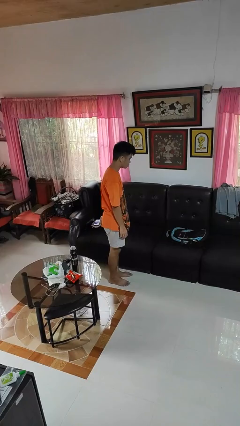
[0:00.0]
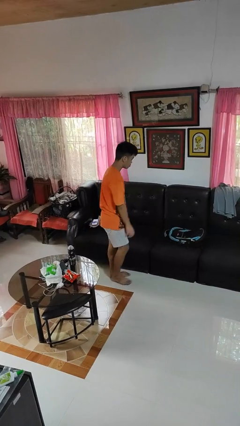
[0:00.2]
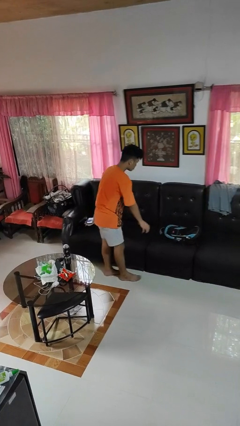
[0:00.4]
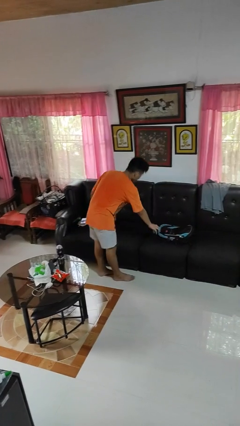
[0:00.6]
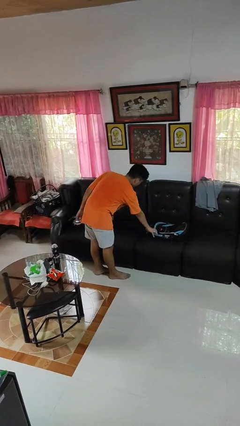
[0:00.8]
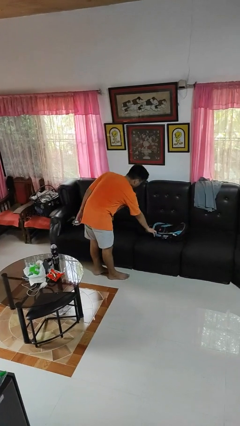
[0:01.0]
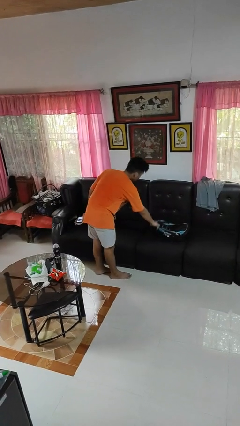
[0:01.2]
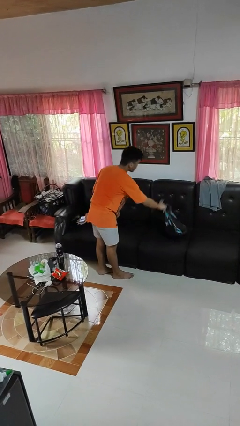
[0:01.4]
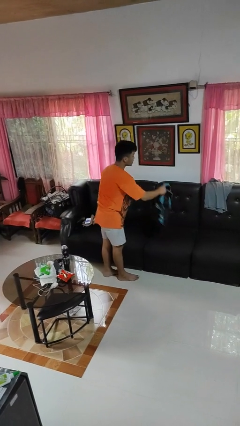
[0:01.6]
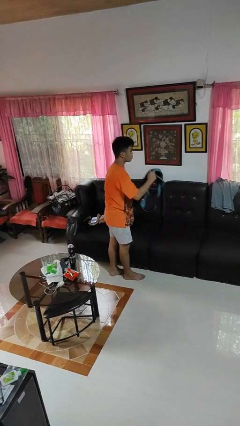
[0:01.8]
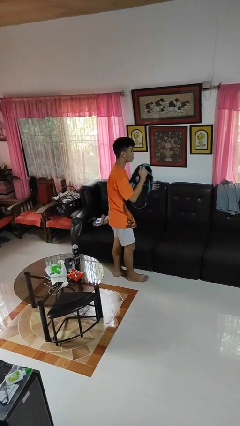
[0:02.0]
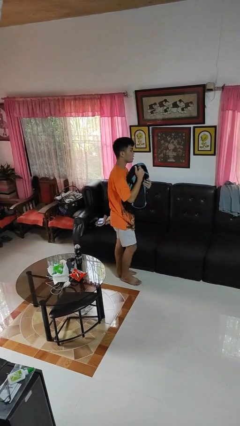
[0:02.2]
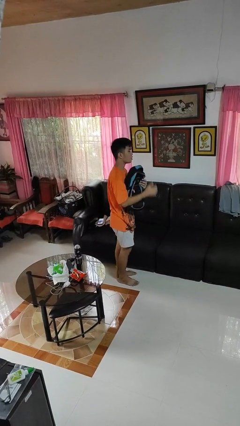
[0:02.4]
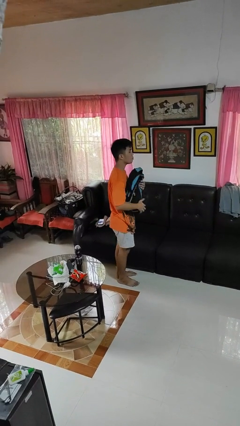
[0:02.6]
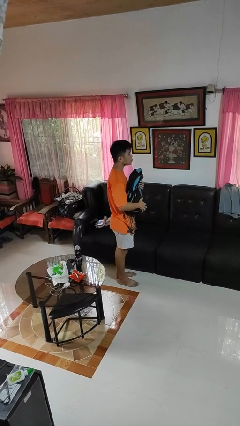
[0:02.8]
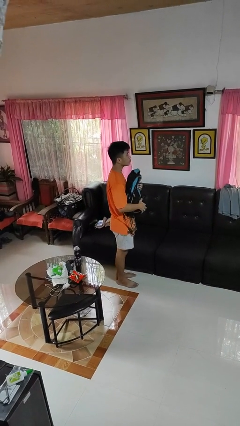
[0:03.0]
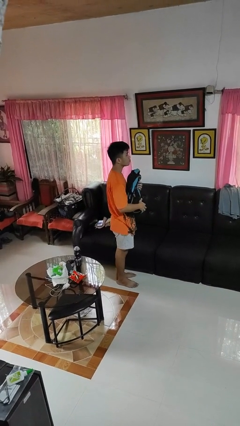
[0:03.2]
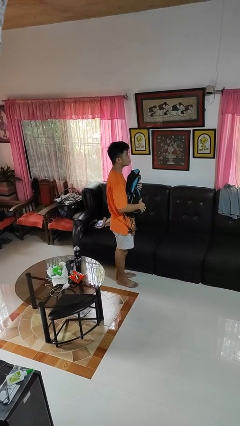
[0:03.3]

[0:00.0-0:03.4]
person picks up object from couch

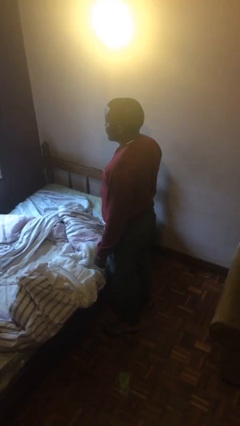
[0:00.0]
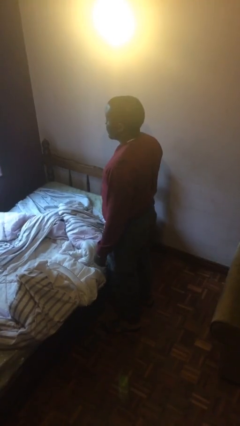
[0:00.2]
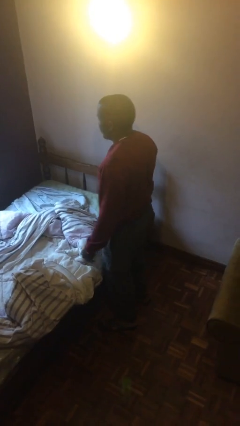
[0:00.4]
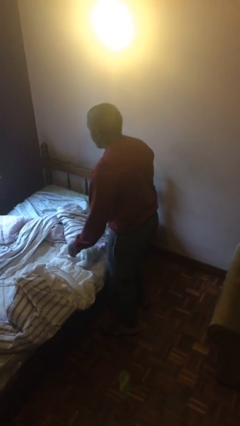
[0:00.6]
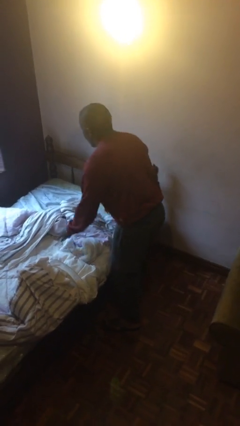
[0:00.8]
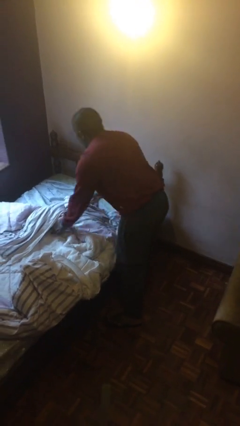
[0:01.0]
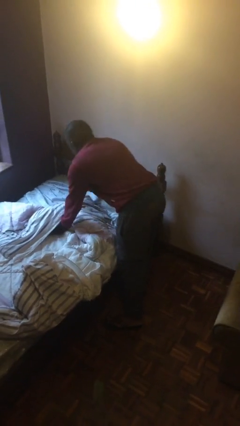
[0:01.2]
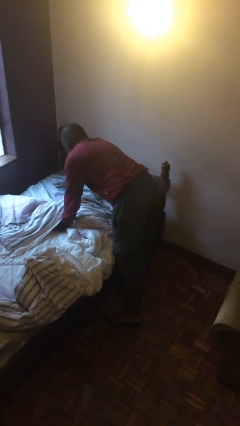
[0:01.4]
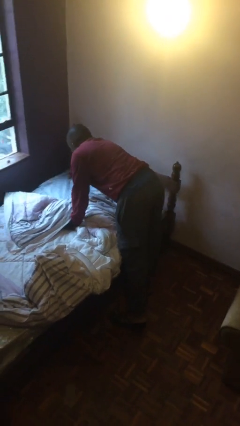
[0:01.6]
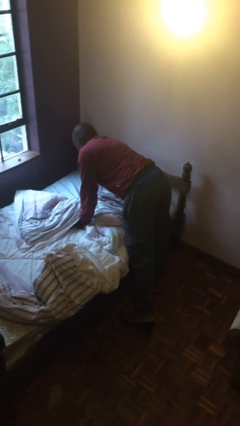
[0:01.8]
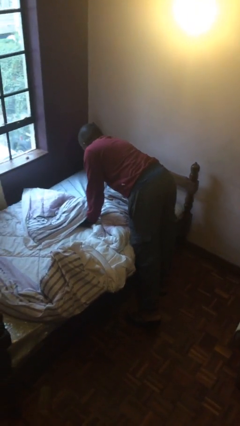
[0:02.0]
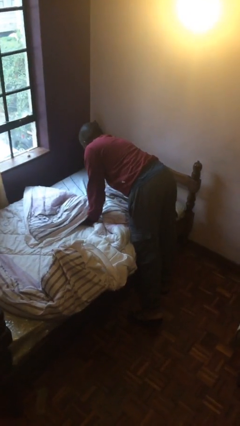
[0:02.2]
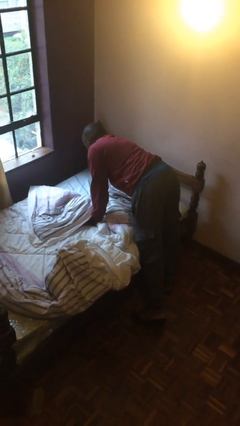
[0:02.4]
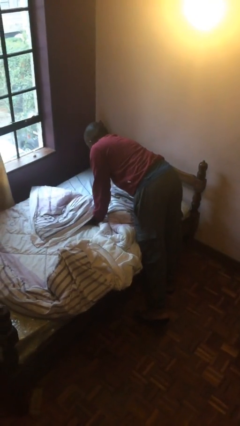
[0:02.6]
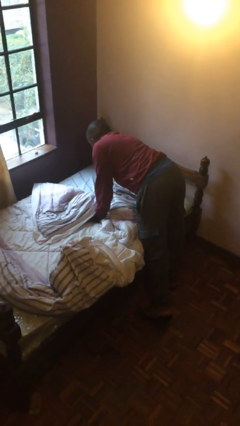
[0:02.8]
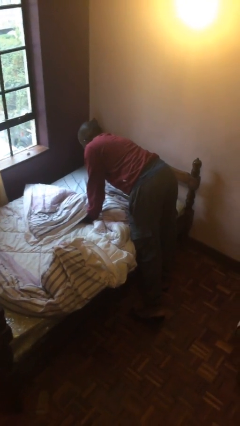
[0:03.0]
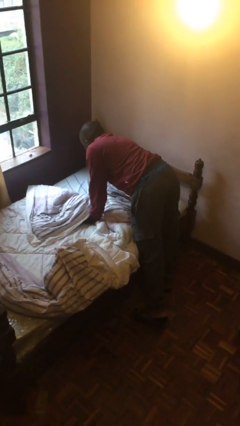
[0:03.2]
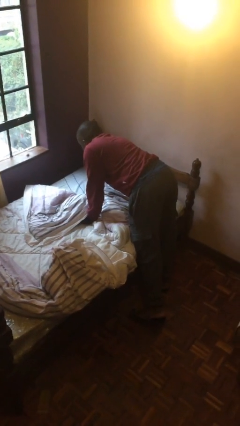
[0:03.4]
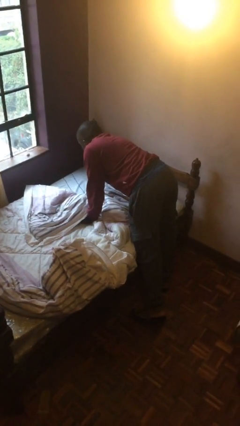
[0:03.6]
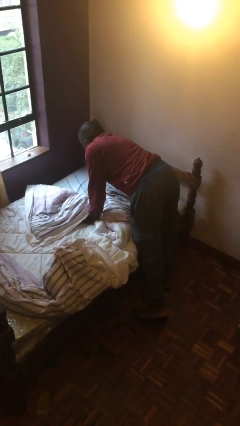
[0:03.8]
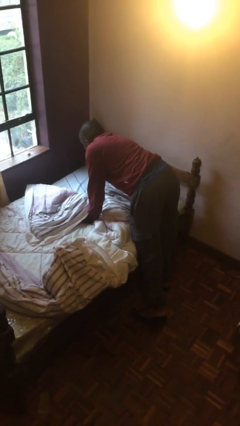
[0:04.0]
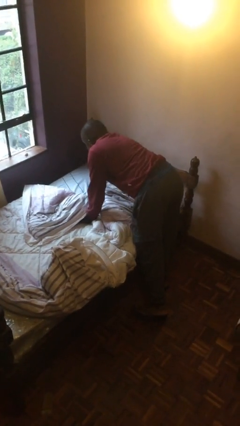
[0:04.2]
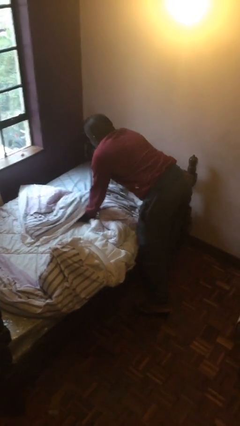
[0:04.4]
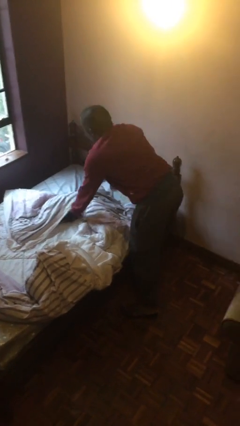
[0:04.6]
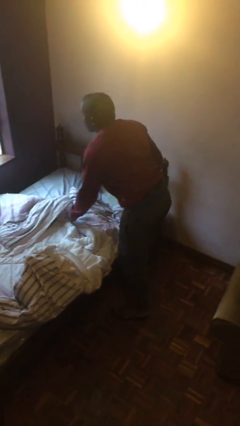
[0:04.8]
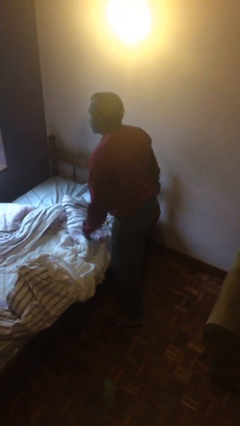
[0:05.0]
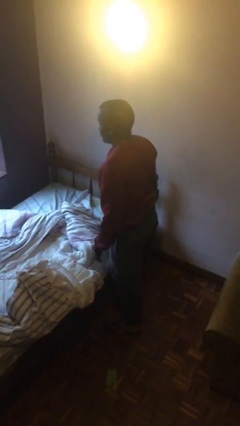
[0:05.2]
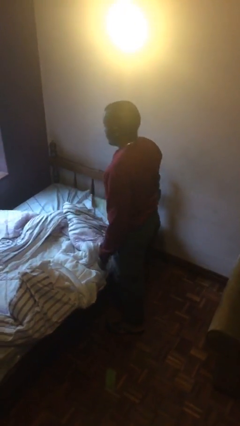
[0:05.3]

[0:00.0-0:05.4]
person makes bed

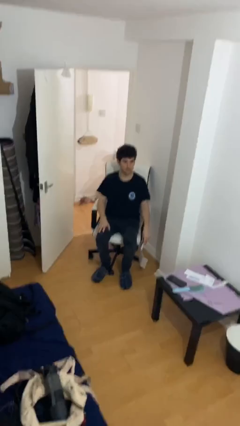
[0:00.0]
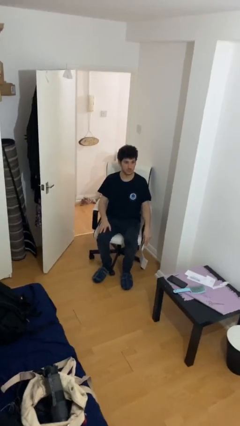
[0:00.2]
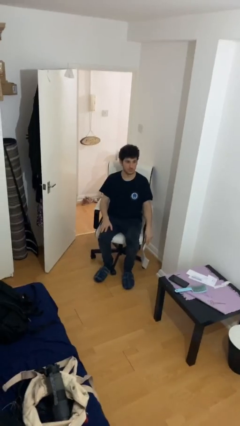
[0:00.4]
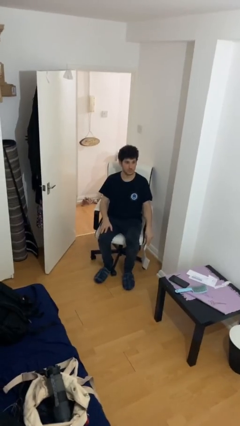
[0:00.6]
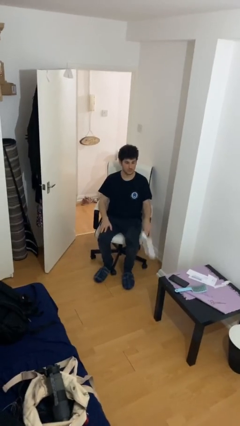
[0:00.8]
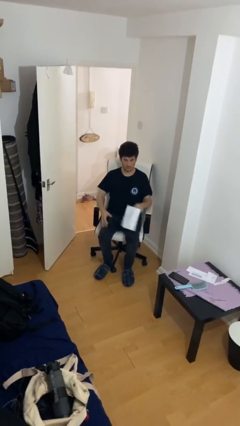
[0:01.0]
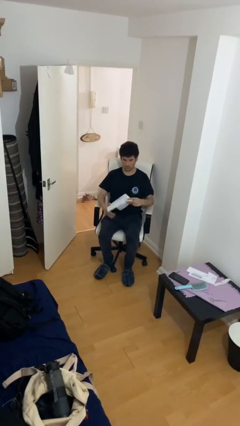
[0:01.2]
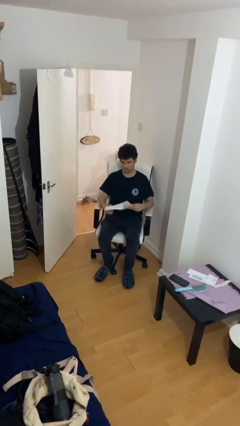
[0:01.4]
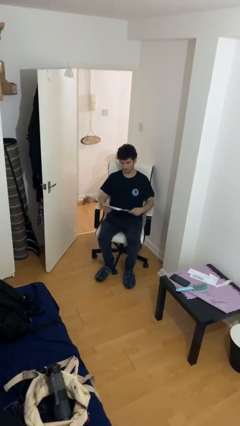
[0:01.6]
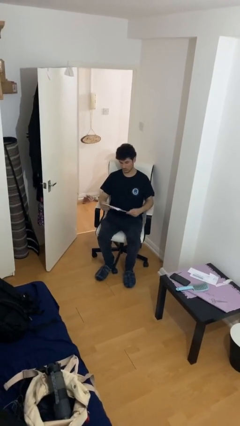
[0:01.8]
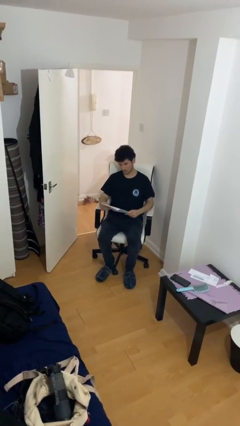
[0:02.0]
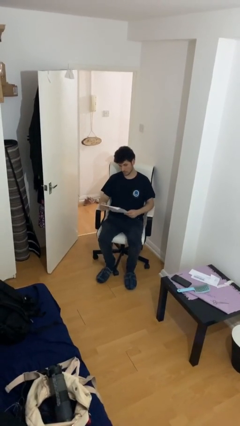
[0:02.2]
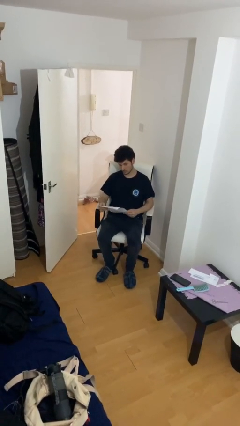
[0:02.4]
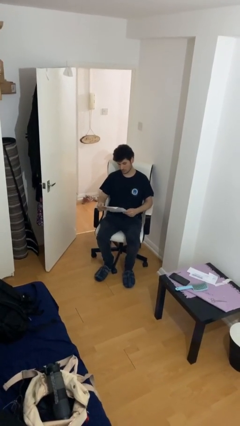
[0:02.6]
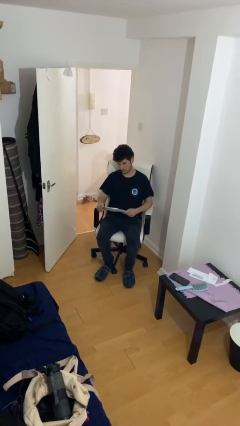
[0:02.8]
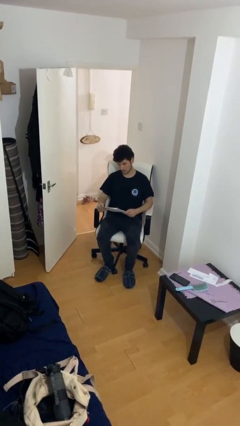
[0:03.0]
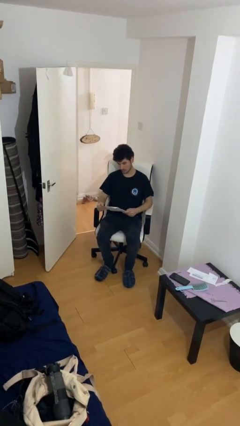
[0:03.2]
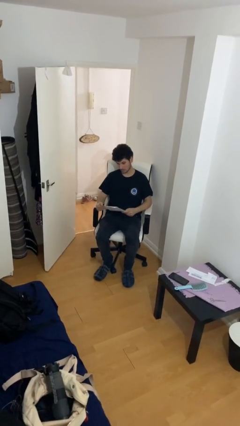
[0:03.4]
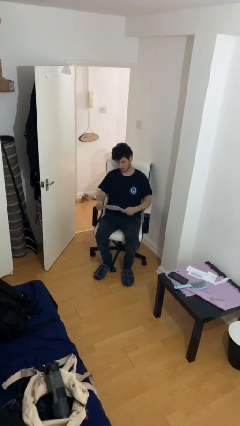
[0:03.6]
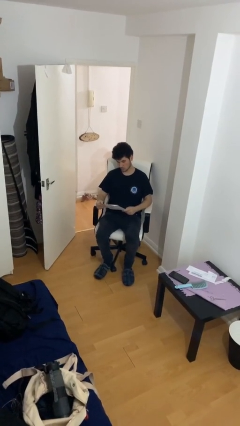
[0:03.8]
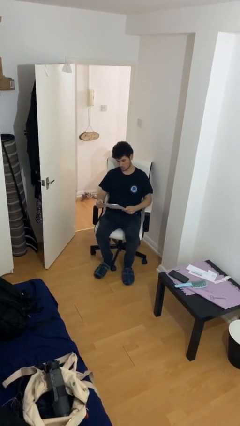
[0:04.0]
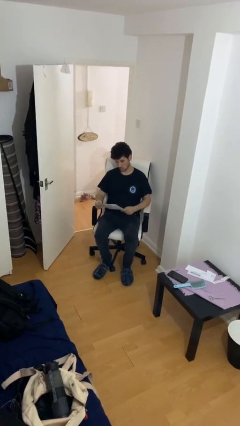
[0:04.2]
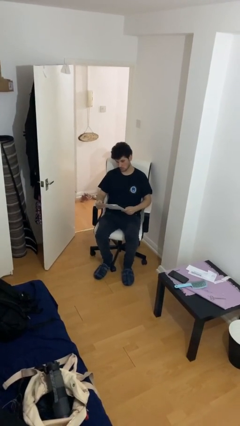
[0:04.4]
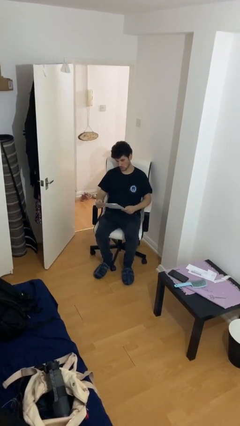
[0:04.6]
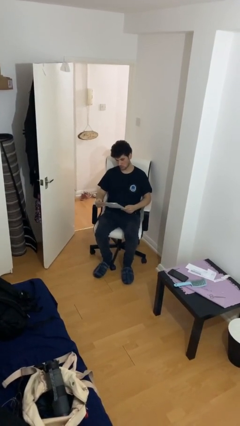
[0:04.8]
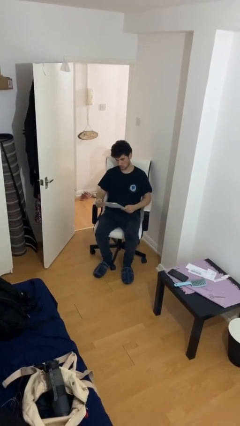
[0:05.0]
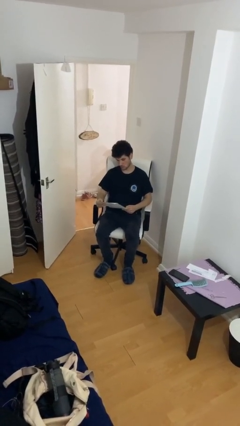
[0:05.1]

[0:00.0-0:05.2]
person reads document

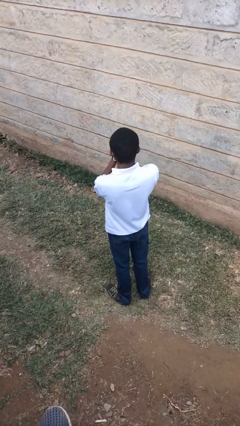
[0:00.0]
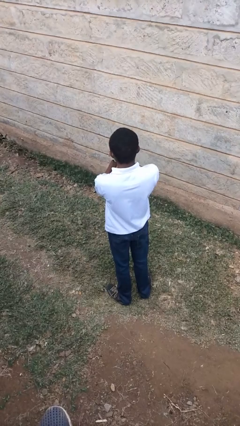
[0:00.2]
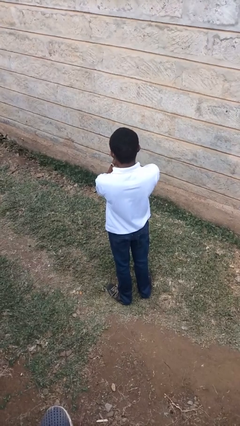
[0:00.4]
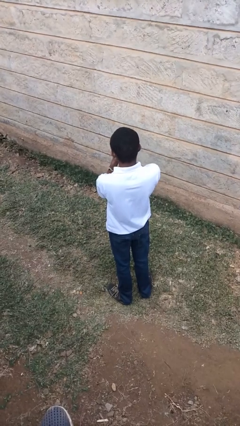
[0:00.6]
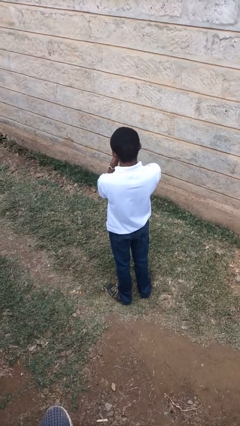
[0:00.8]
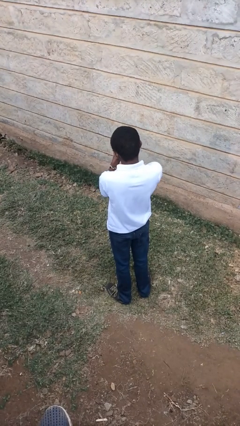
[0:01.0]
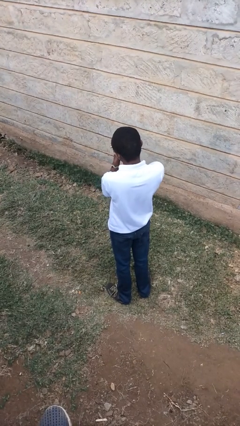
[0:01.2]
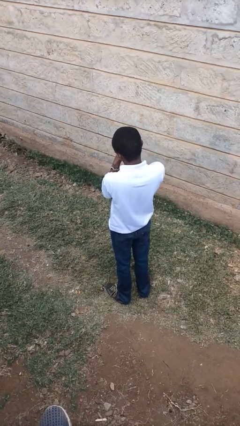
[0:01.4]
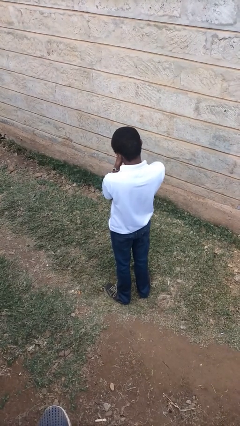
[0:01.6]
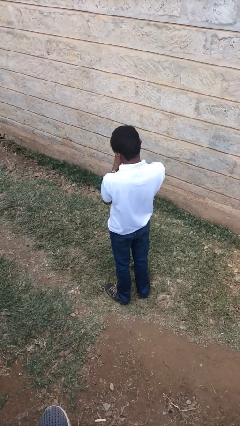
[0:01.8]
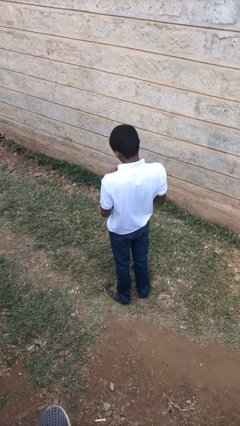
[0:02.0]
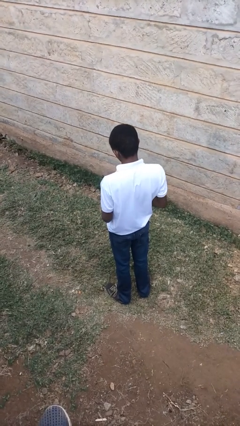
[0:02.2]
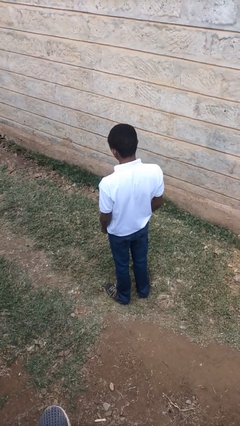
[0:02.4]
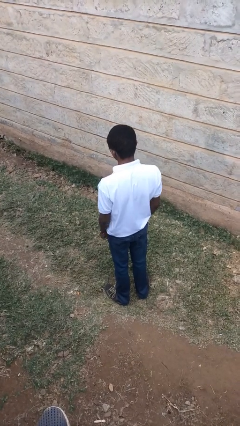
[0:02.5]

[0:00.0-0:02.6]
person blows into hands

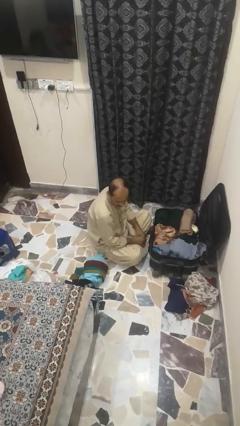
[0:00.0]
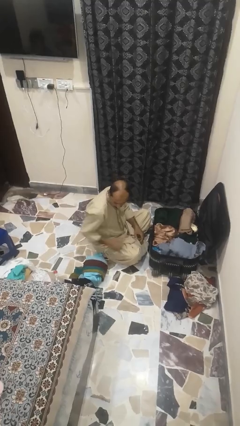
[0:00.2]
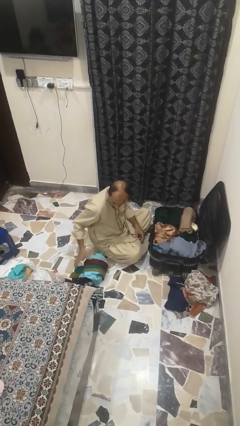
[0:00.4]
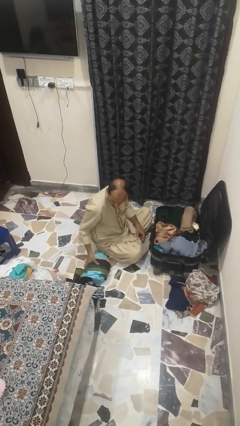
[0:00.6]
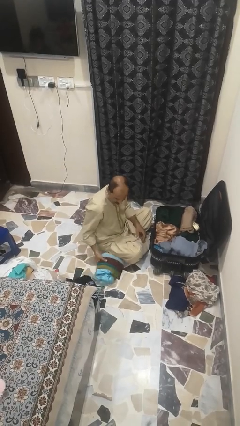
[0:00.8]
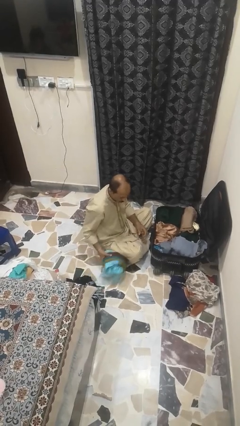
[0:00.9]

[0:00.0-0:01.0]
person loads clothes into suitcase

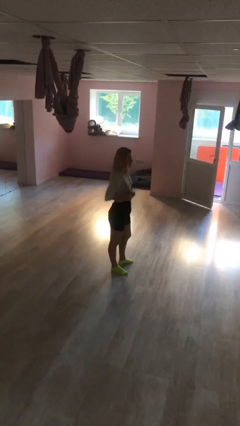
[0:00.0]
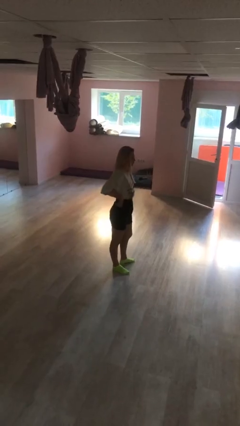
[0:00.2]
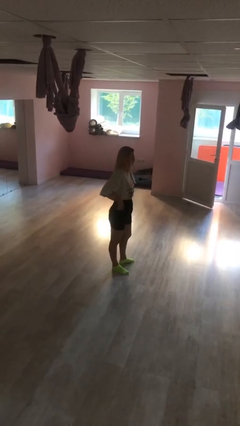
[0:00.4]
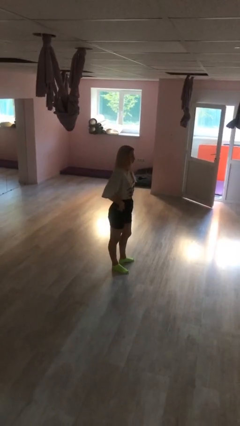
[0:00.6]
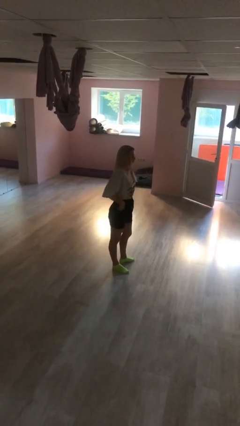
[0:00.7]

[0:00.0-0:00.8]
person puts phone into pocket
